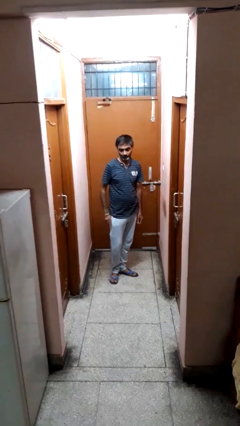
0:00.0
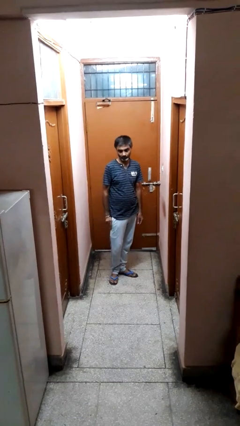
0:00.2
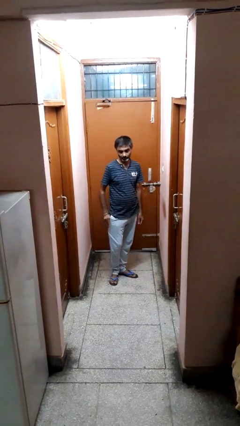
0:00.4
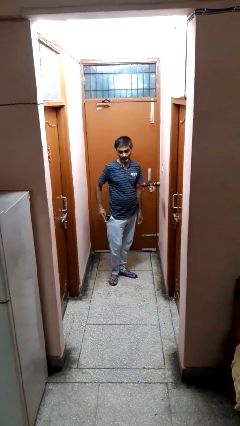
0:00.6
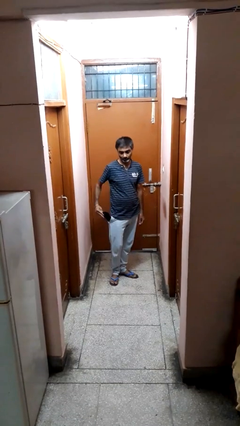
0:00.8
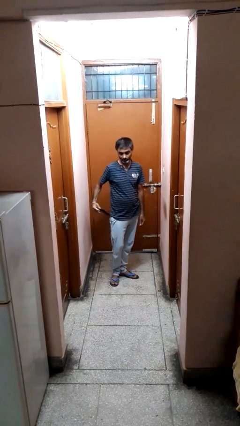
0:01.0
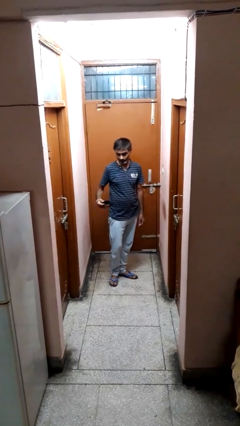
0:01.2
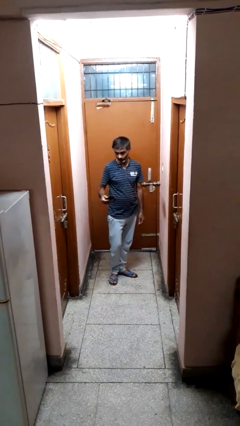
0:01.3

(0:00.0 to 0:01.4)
person takes phone from pocket

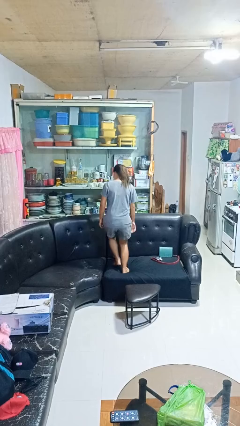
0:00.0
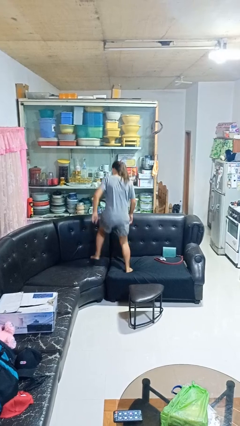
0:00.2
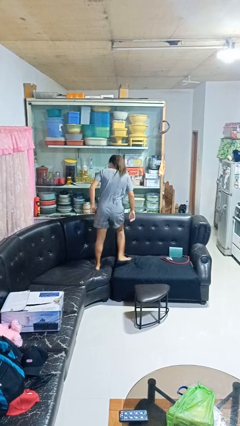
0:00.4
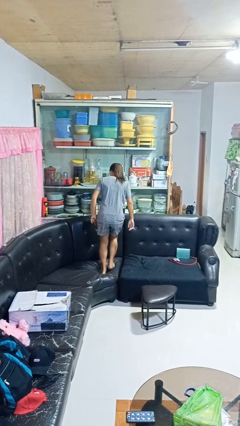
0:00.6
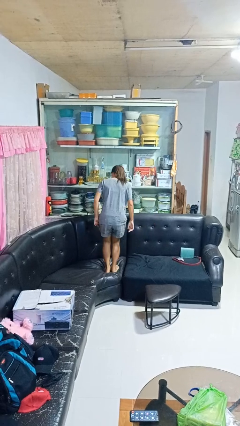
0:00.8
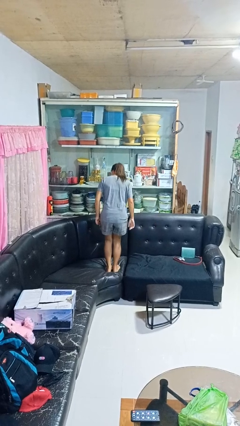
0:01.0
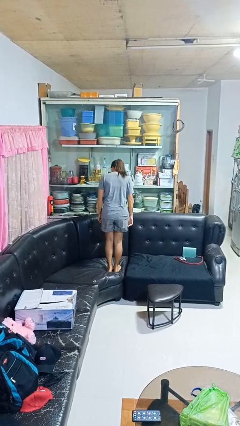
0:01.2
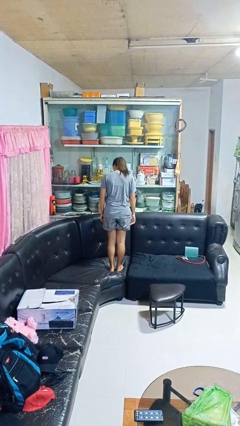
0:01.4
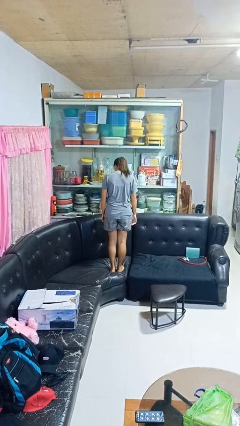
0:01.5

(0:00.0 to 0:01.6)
person jumps on couch

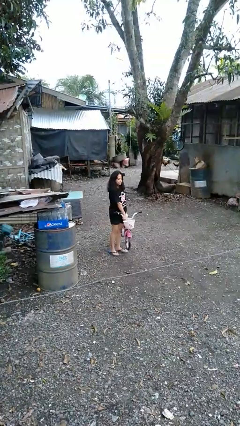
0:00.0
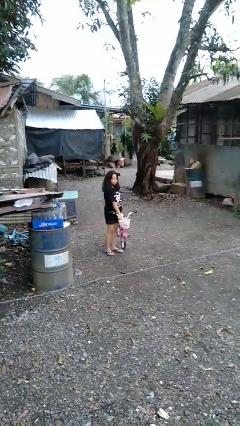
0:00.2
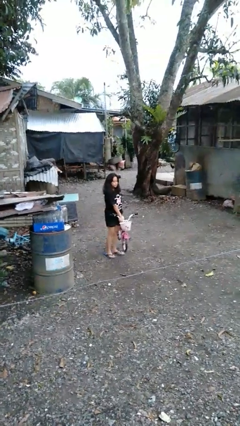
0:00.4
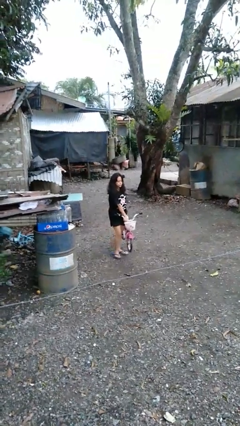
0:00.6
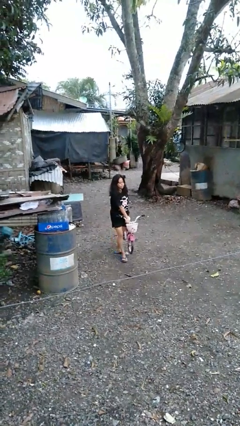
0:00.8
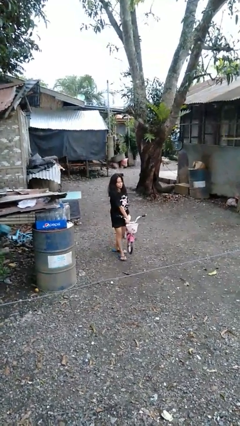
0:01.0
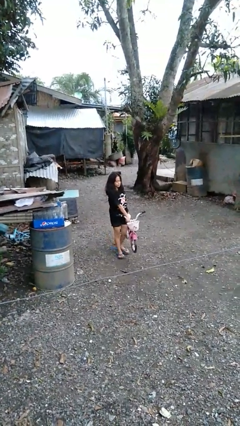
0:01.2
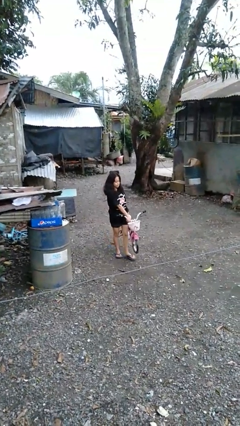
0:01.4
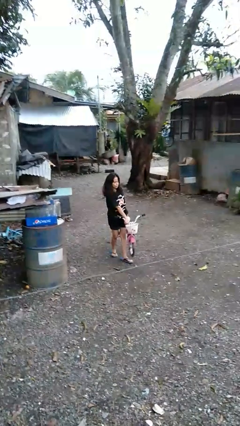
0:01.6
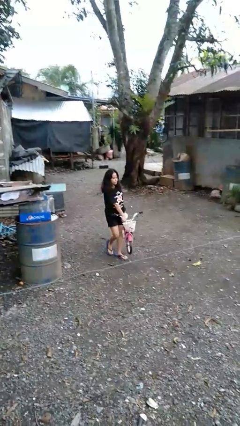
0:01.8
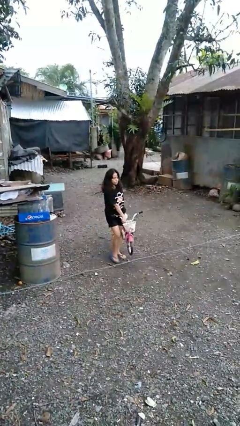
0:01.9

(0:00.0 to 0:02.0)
person carries bicycle

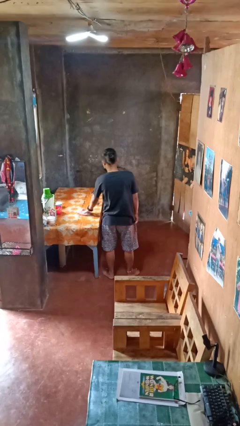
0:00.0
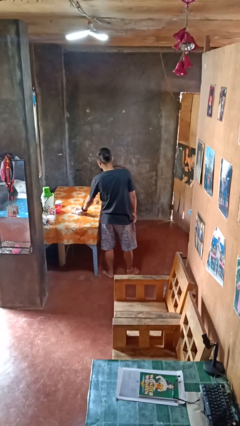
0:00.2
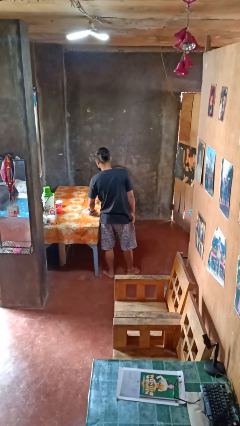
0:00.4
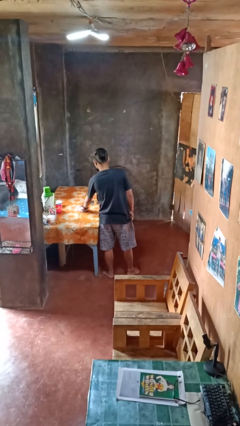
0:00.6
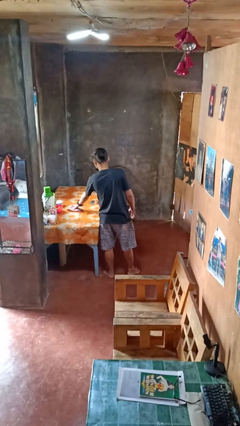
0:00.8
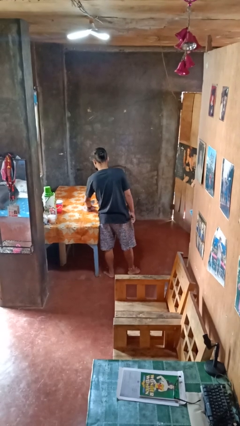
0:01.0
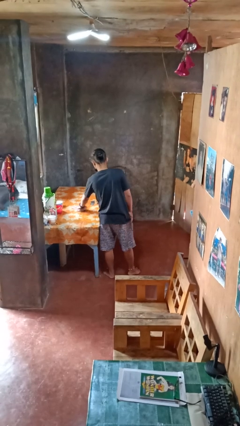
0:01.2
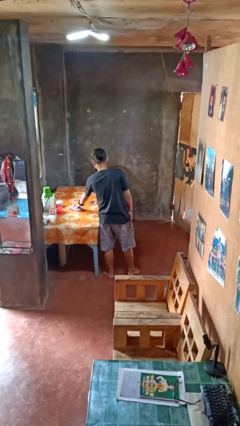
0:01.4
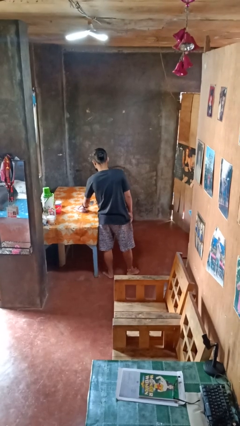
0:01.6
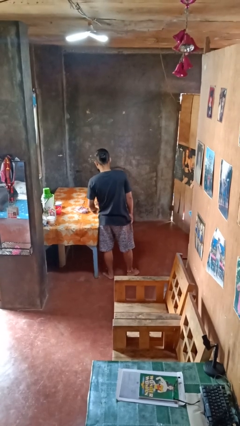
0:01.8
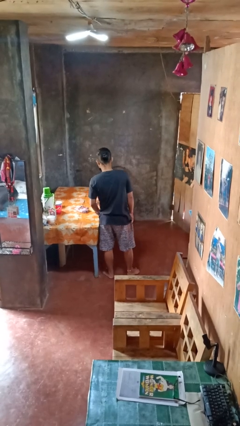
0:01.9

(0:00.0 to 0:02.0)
person cleans table with rag

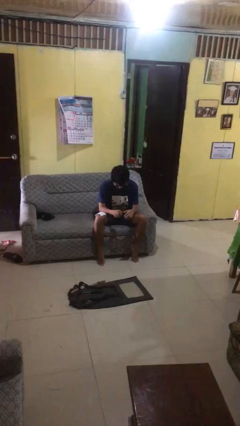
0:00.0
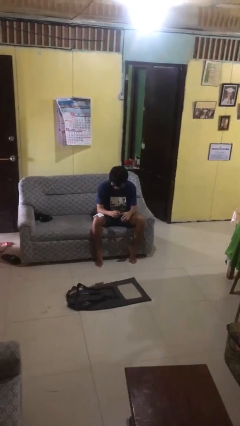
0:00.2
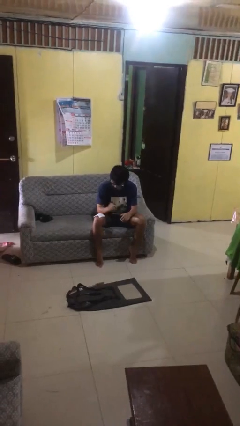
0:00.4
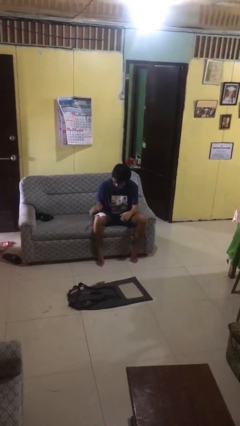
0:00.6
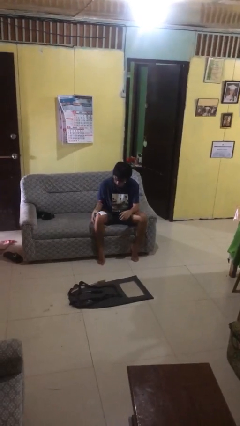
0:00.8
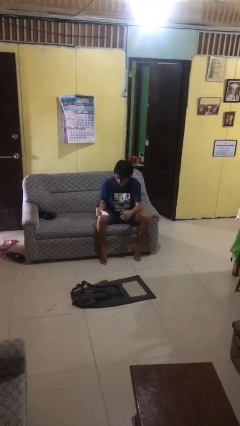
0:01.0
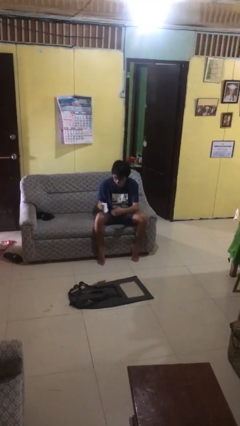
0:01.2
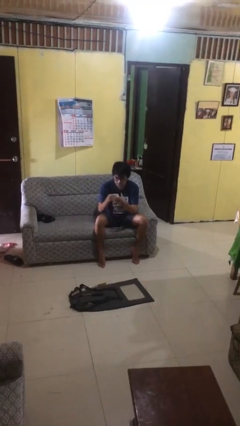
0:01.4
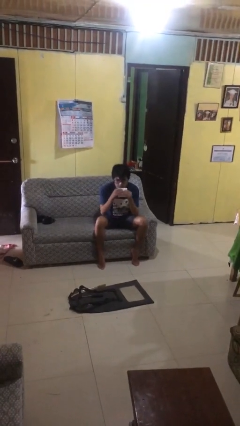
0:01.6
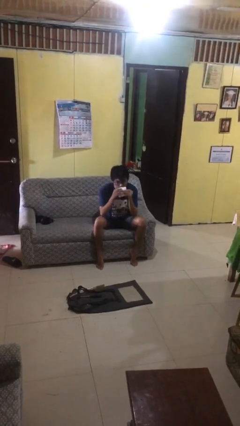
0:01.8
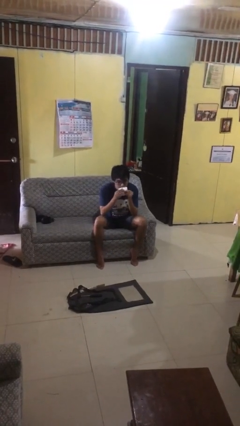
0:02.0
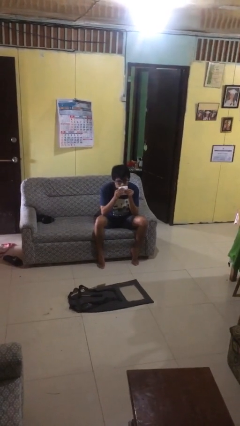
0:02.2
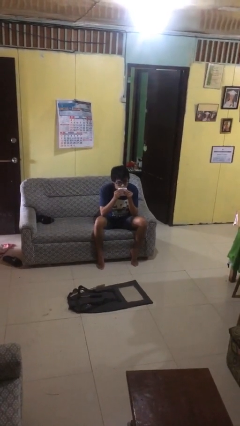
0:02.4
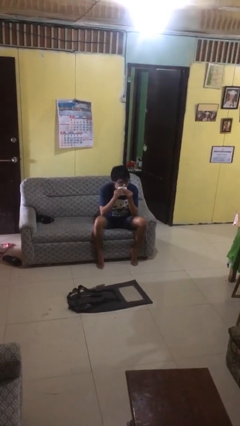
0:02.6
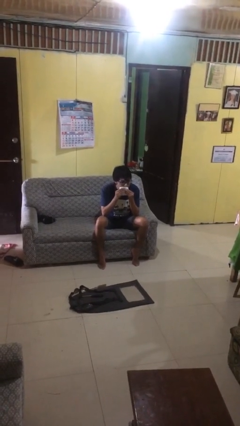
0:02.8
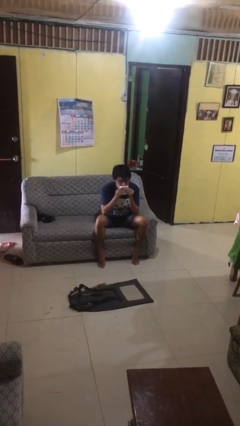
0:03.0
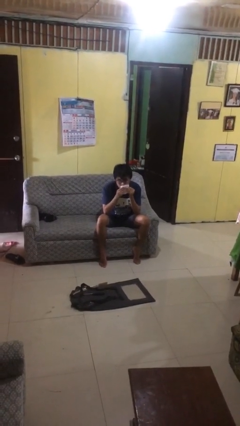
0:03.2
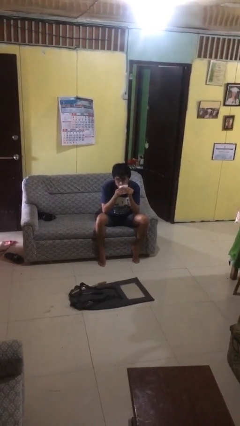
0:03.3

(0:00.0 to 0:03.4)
person wipes mouth with napkin

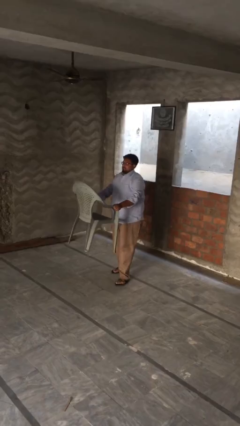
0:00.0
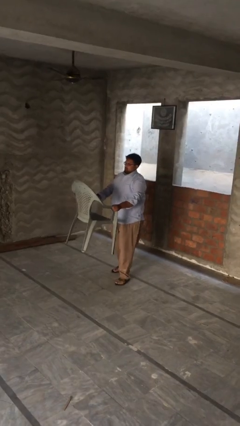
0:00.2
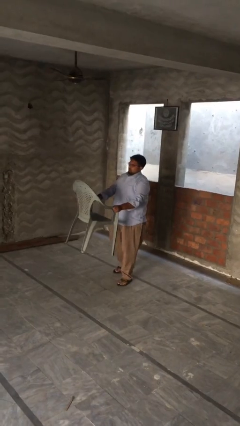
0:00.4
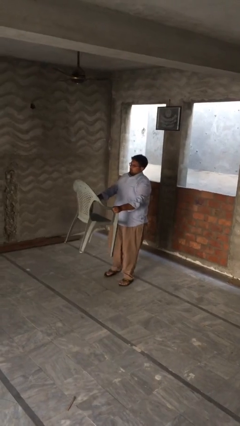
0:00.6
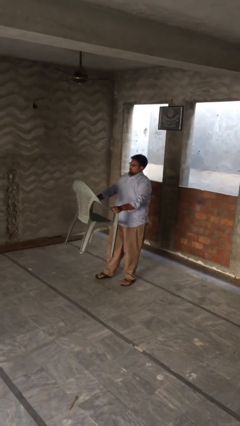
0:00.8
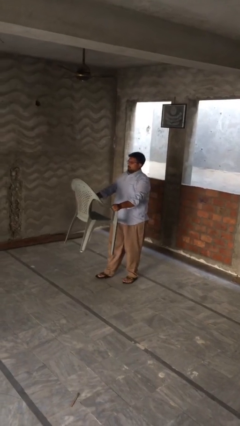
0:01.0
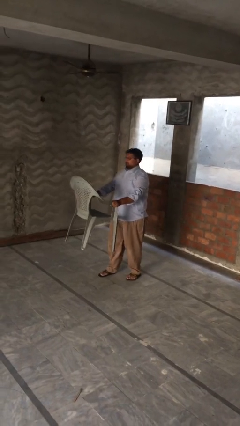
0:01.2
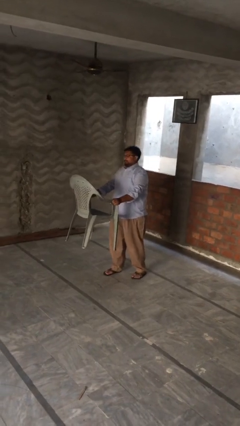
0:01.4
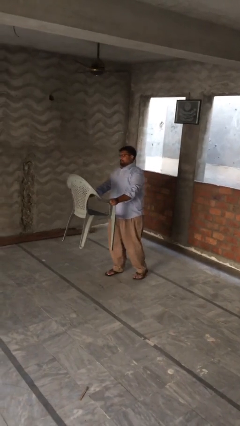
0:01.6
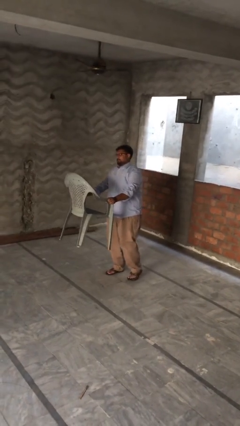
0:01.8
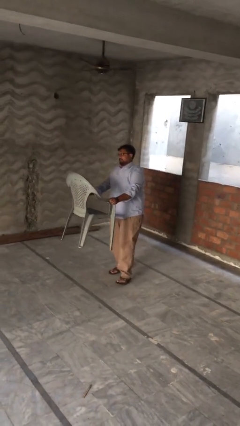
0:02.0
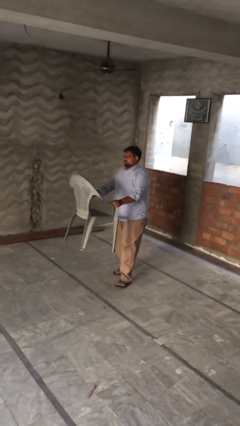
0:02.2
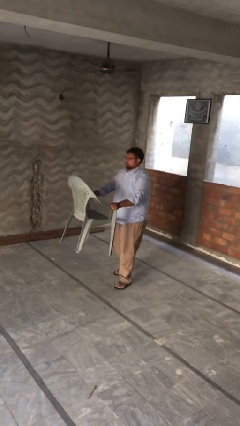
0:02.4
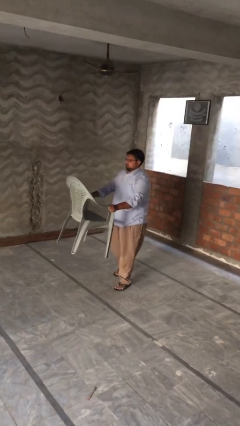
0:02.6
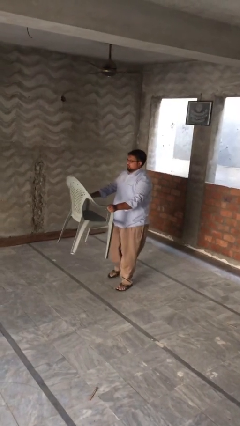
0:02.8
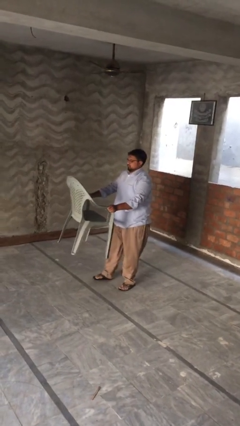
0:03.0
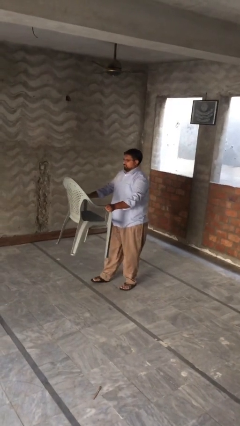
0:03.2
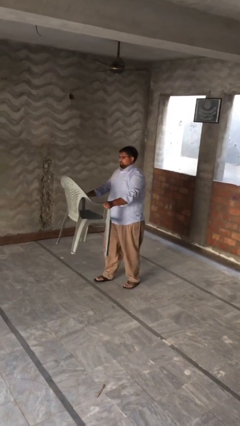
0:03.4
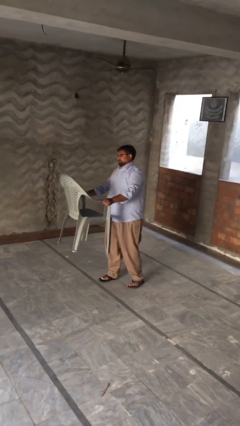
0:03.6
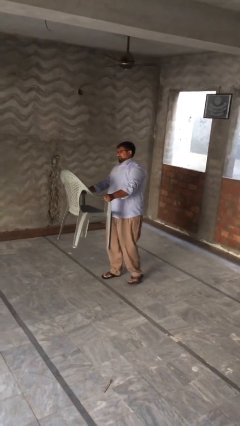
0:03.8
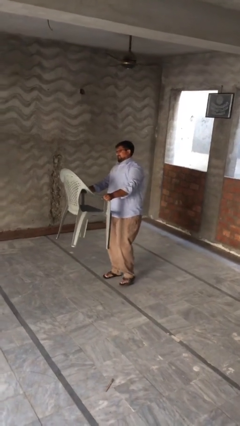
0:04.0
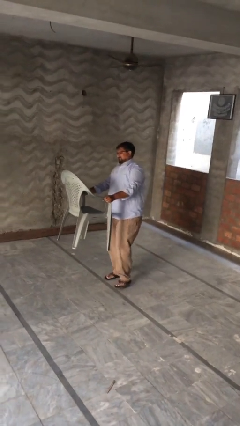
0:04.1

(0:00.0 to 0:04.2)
person carries heavy object

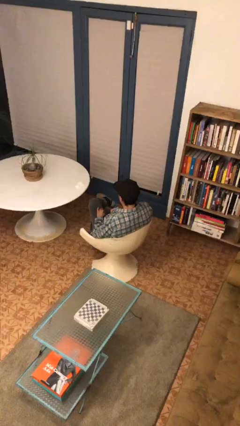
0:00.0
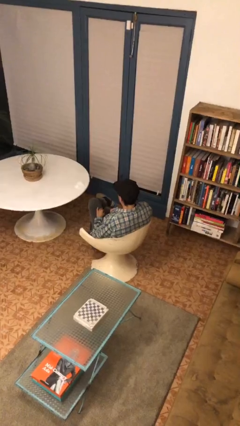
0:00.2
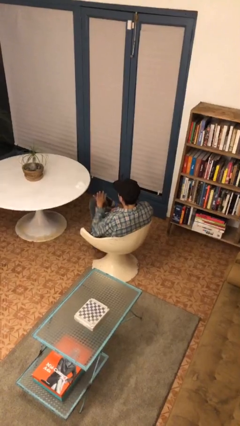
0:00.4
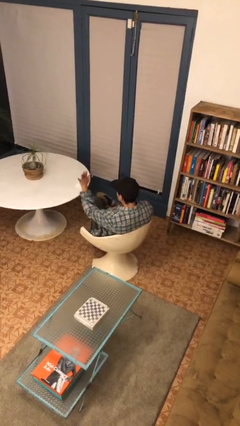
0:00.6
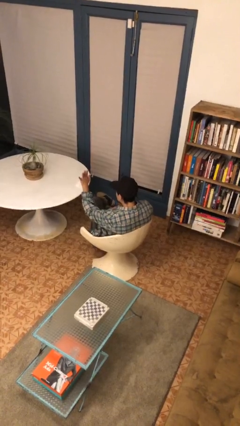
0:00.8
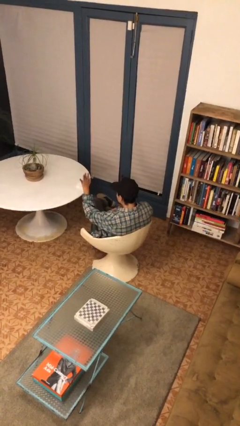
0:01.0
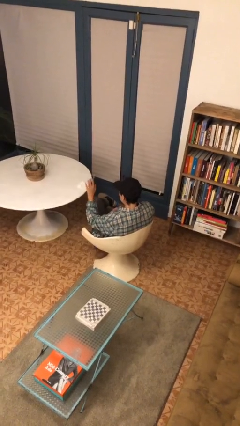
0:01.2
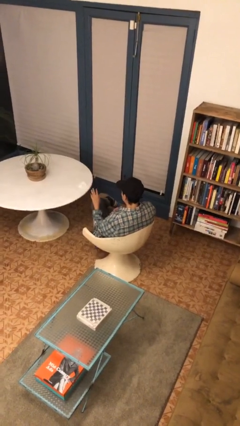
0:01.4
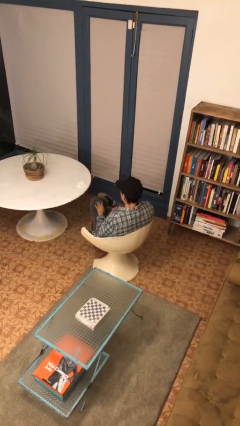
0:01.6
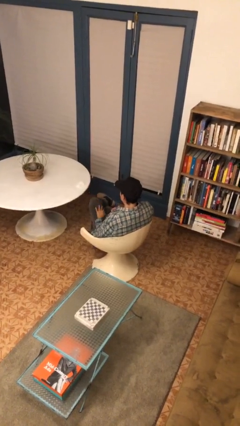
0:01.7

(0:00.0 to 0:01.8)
person gestures stop

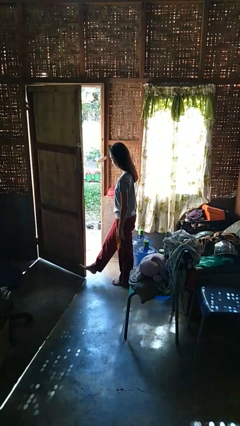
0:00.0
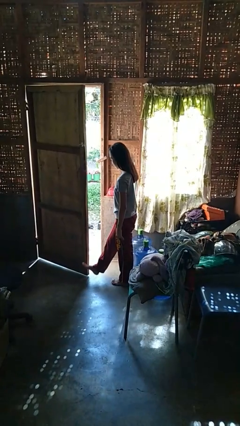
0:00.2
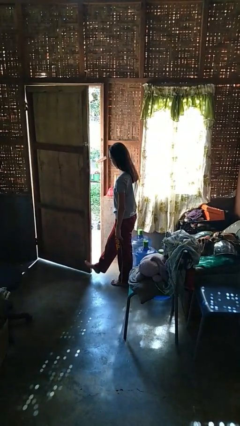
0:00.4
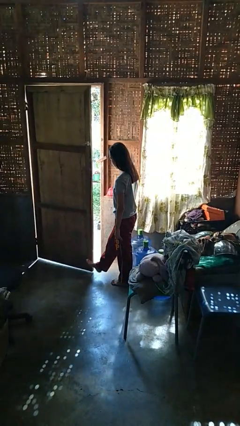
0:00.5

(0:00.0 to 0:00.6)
person closes door with foot
